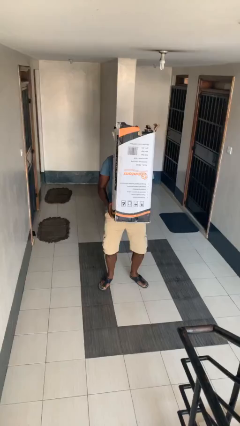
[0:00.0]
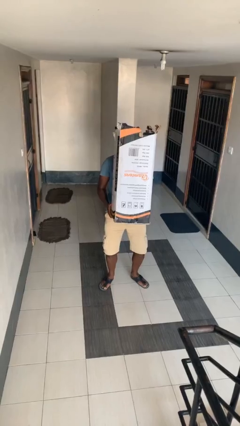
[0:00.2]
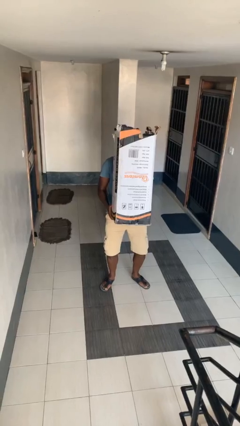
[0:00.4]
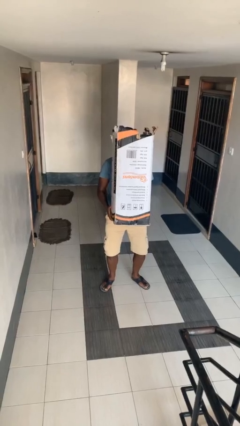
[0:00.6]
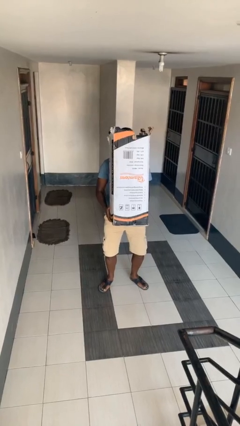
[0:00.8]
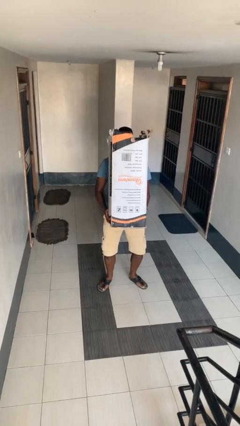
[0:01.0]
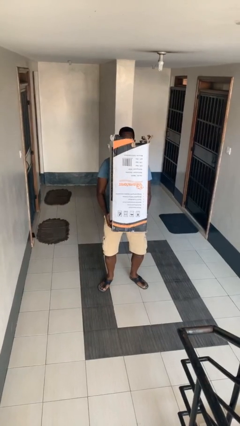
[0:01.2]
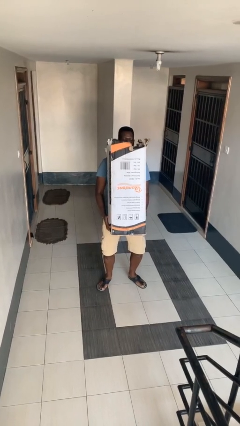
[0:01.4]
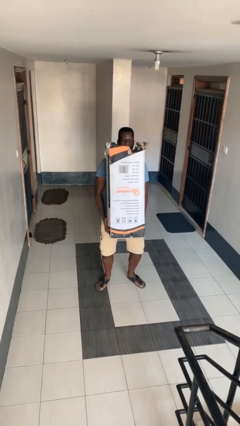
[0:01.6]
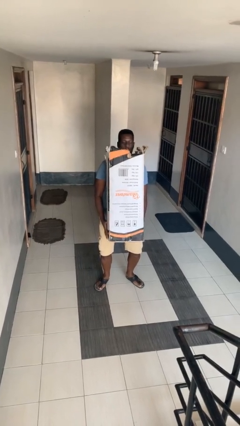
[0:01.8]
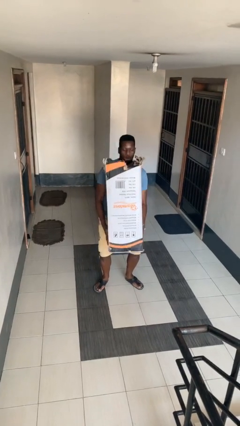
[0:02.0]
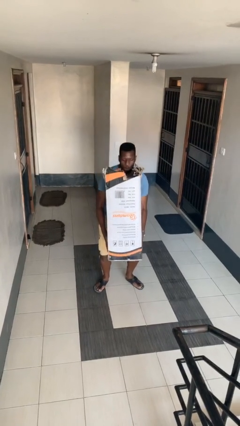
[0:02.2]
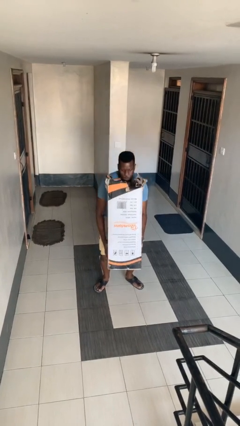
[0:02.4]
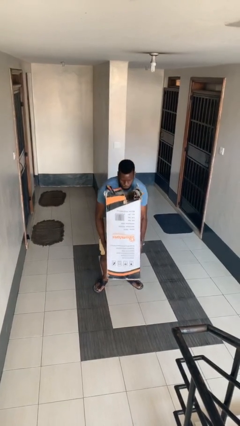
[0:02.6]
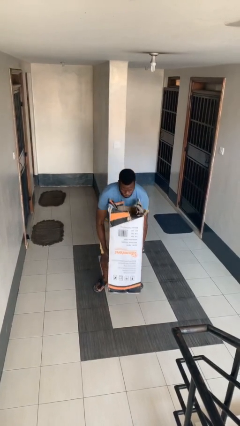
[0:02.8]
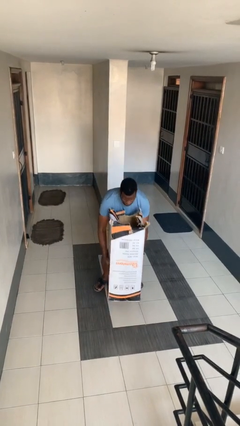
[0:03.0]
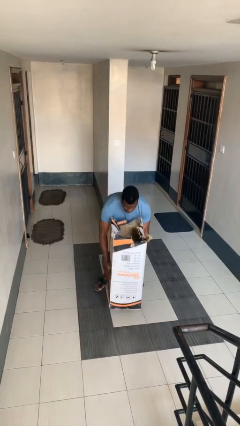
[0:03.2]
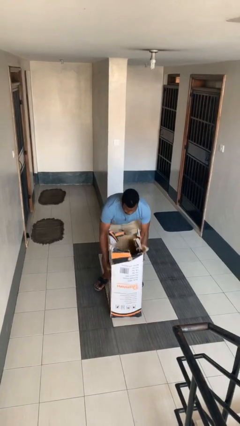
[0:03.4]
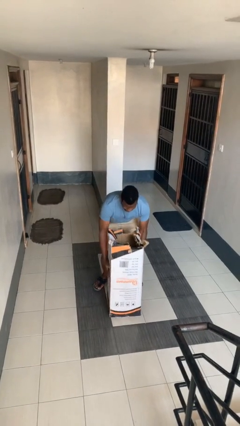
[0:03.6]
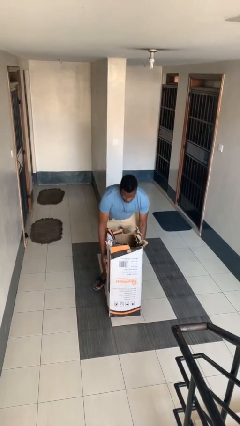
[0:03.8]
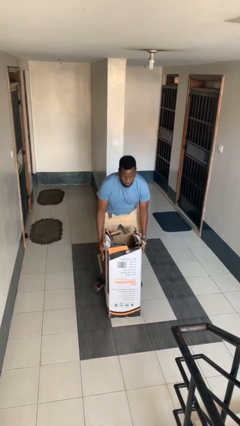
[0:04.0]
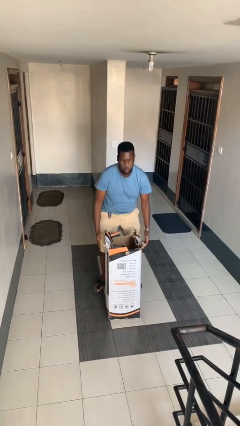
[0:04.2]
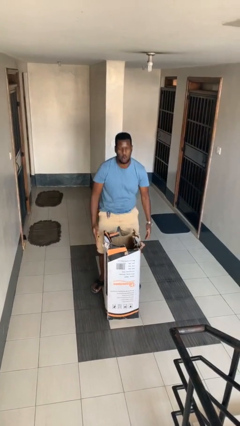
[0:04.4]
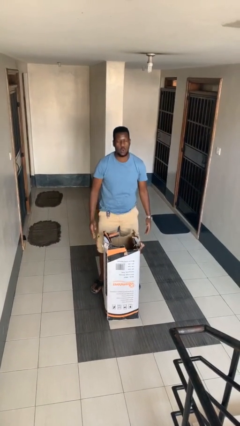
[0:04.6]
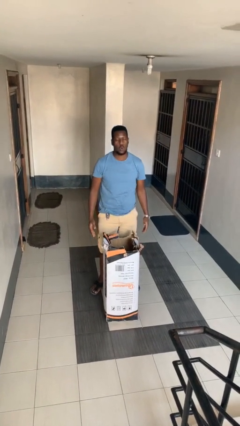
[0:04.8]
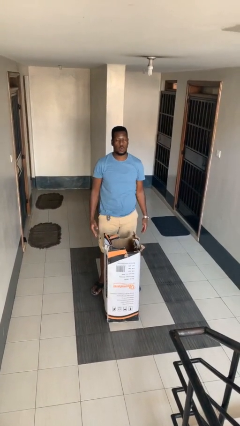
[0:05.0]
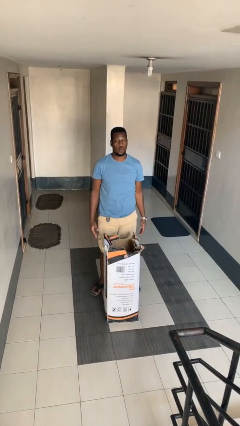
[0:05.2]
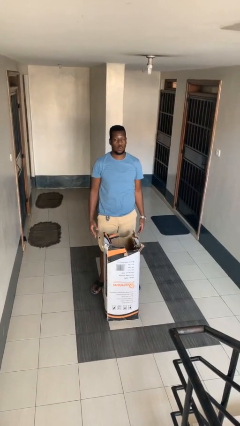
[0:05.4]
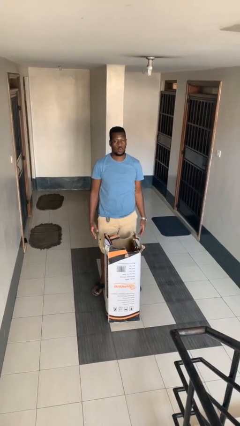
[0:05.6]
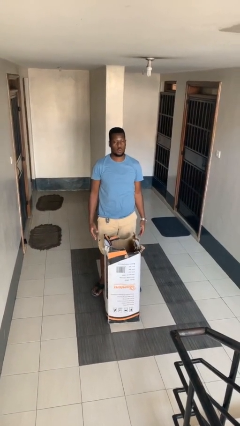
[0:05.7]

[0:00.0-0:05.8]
person puts down object on floor

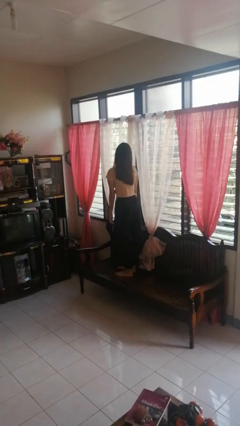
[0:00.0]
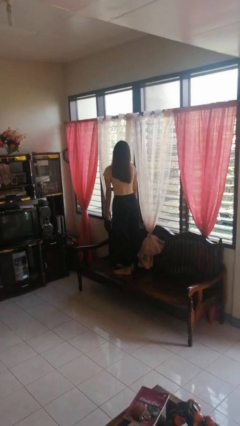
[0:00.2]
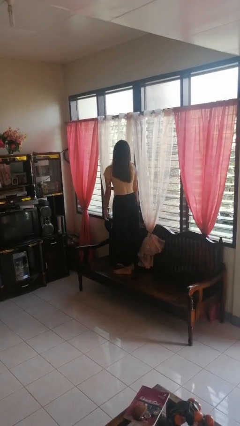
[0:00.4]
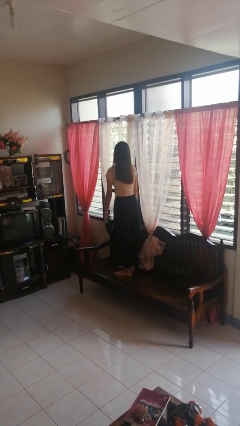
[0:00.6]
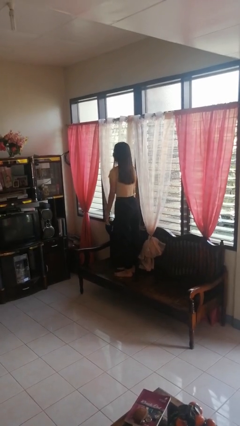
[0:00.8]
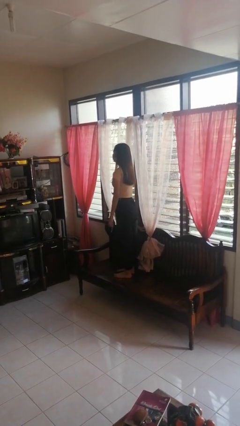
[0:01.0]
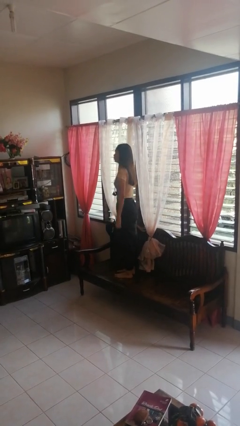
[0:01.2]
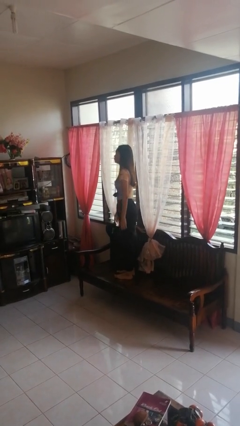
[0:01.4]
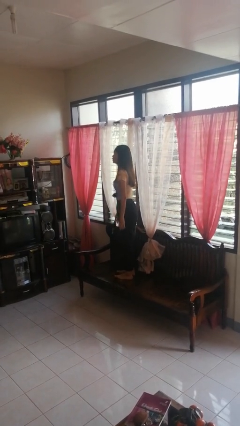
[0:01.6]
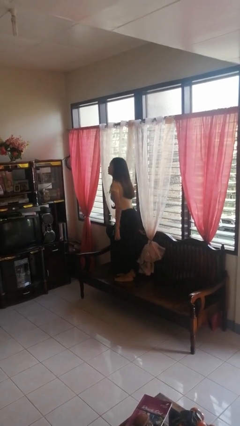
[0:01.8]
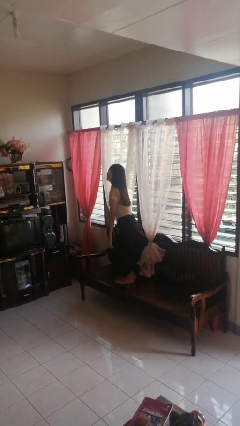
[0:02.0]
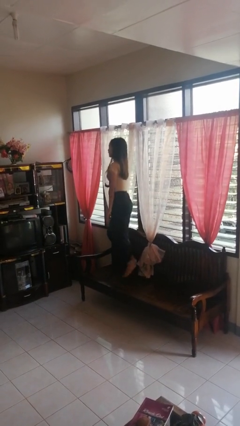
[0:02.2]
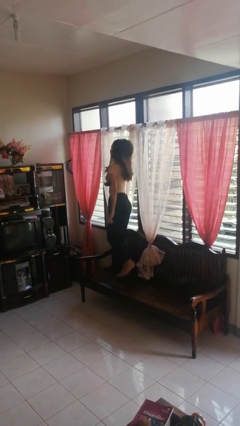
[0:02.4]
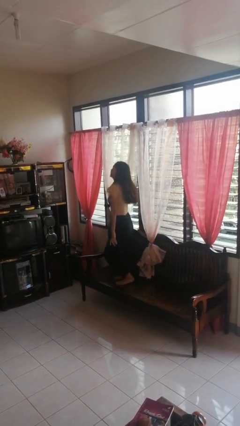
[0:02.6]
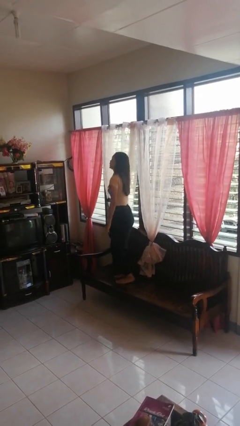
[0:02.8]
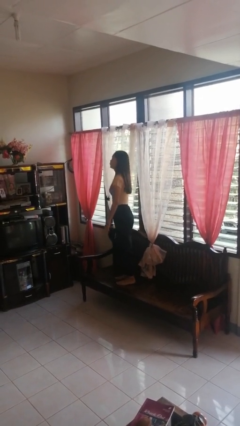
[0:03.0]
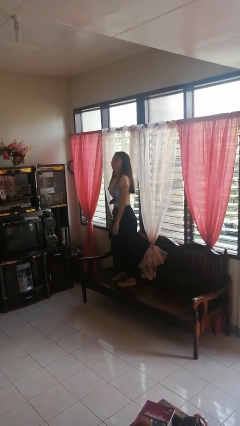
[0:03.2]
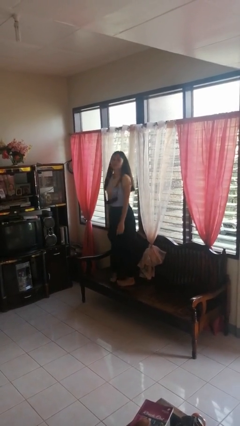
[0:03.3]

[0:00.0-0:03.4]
person jumps on couch

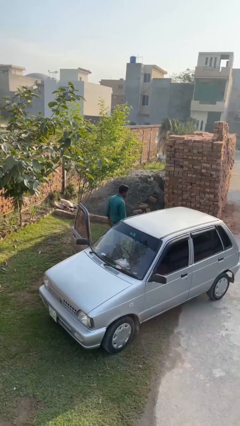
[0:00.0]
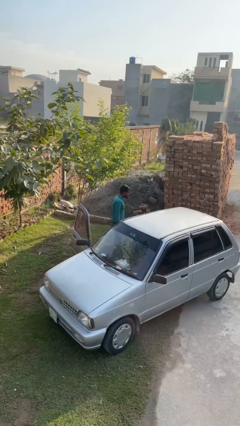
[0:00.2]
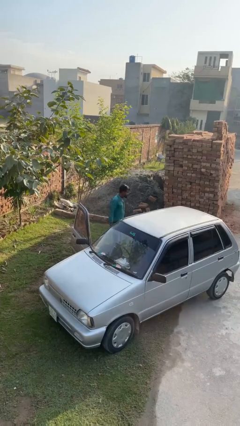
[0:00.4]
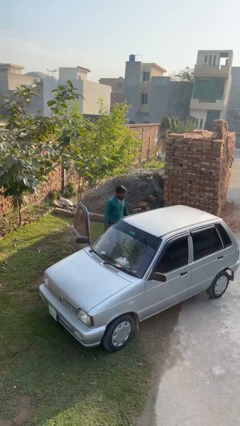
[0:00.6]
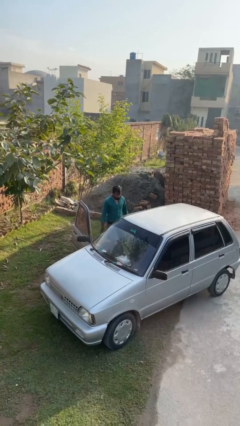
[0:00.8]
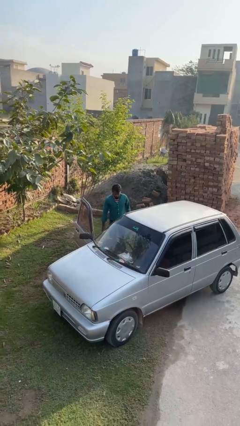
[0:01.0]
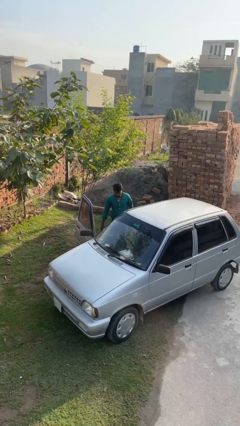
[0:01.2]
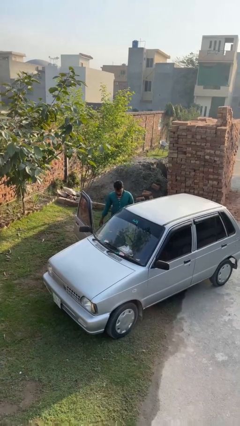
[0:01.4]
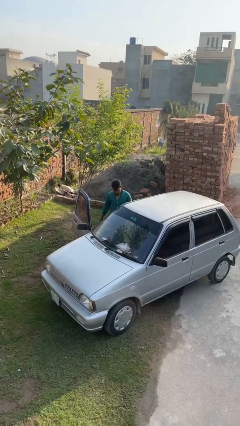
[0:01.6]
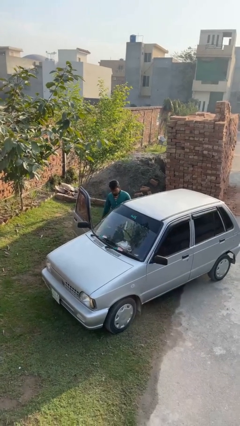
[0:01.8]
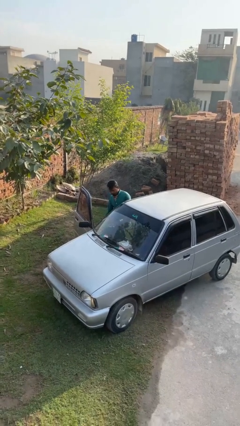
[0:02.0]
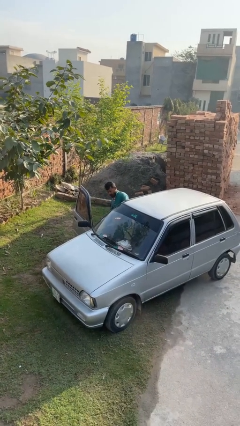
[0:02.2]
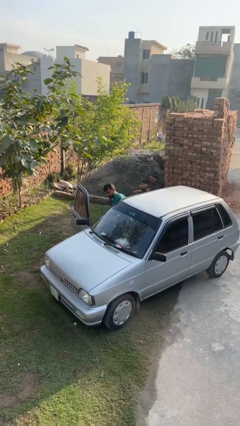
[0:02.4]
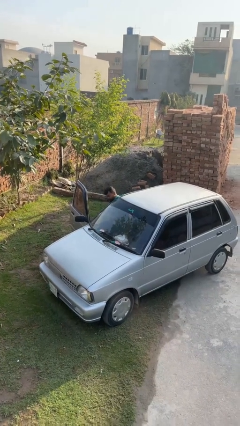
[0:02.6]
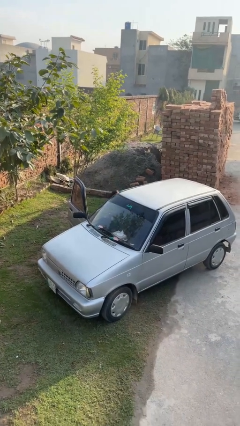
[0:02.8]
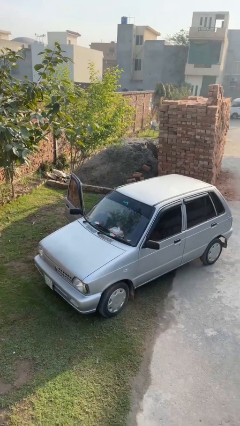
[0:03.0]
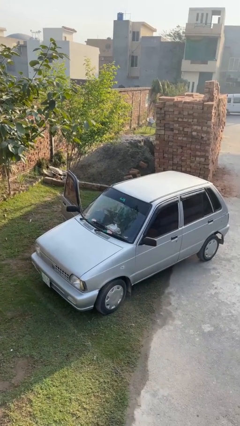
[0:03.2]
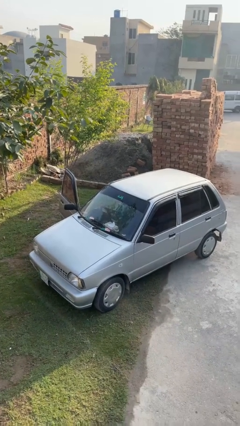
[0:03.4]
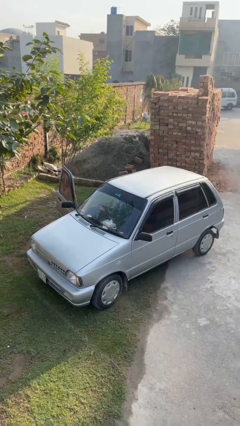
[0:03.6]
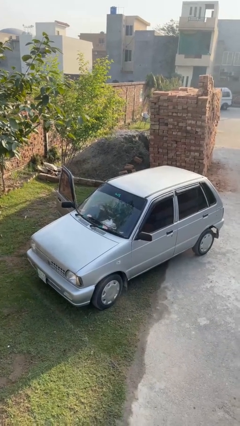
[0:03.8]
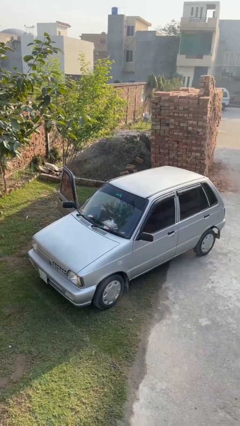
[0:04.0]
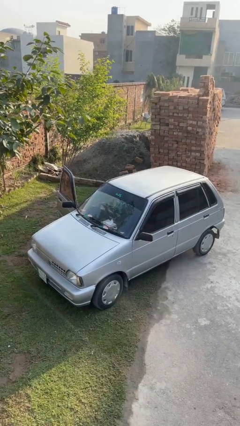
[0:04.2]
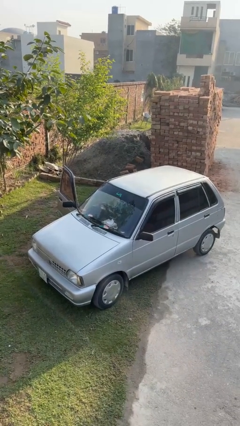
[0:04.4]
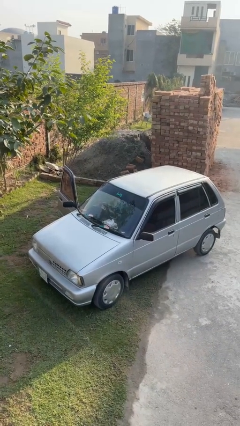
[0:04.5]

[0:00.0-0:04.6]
person enters car

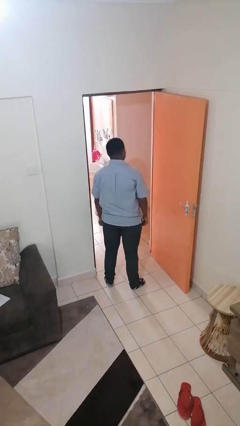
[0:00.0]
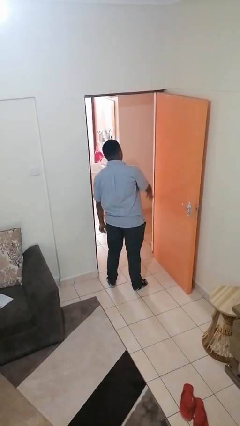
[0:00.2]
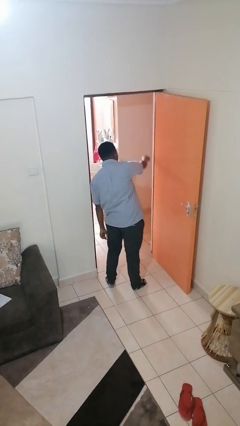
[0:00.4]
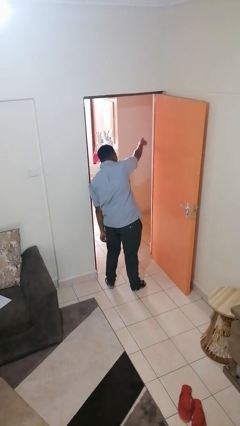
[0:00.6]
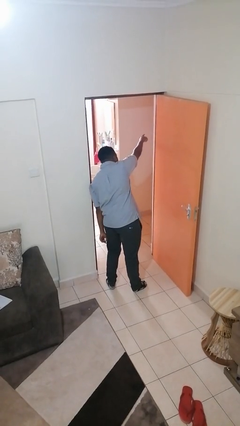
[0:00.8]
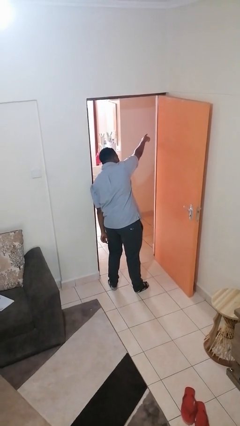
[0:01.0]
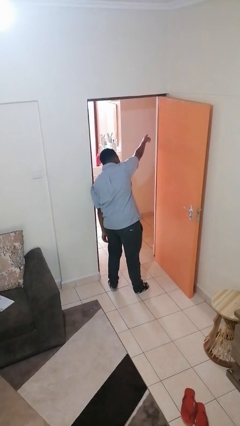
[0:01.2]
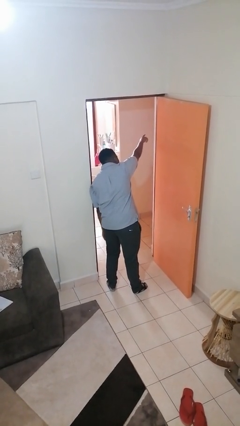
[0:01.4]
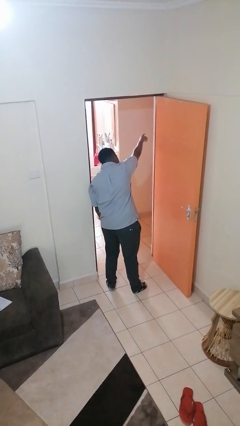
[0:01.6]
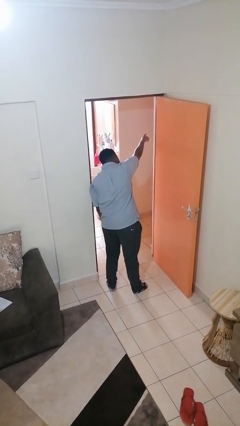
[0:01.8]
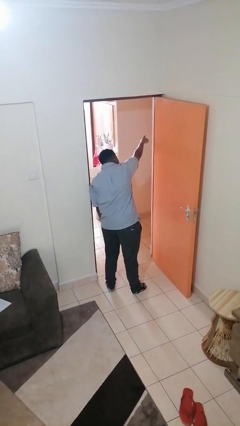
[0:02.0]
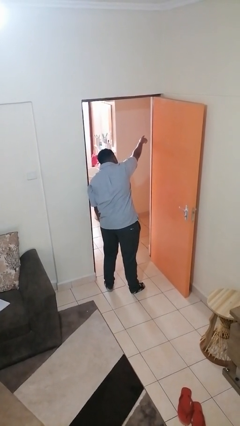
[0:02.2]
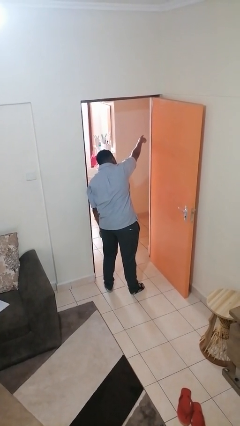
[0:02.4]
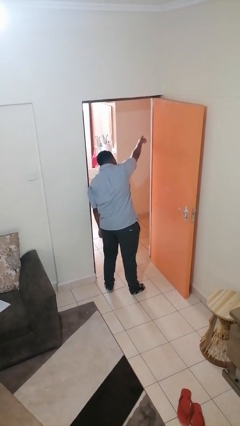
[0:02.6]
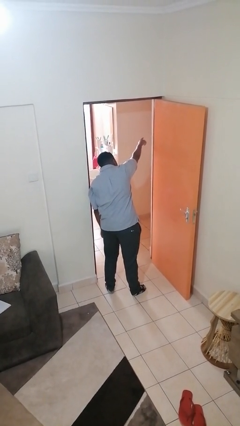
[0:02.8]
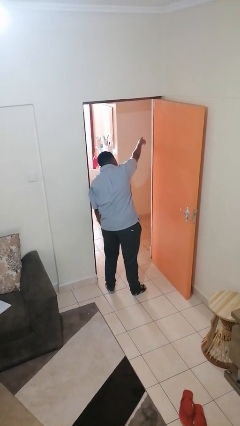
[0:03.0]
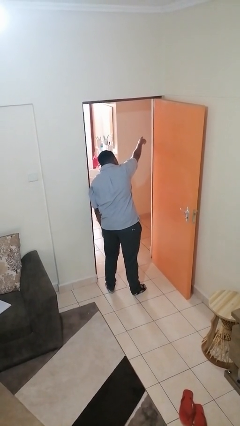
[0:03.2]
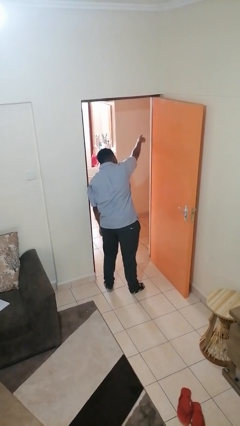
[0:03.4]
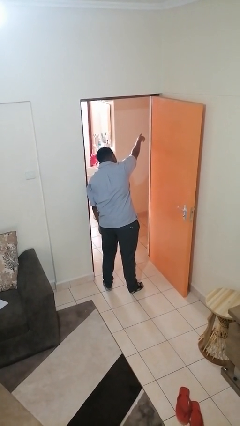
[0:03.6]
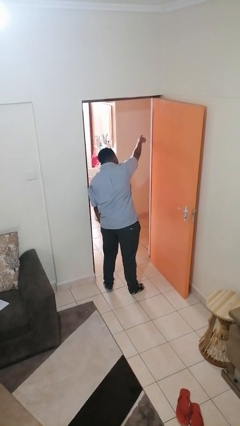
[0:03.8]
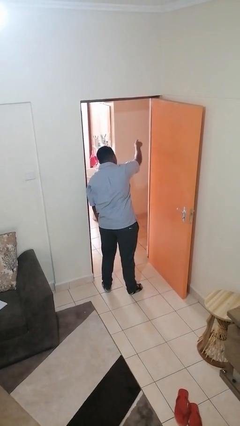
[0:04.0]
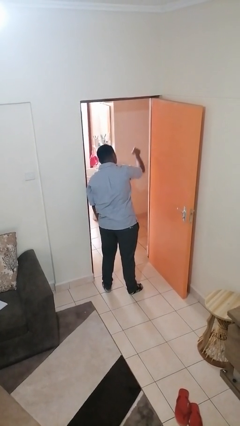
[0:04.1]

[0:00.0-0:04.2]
person points at person
